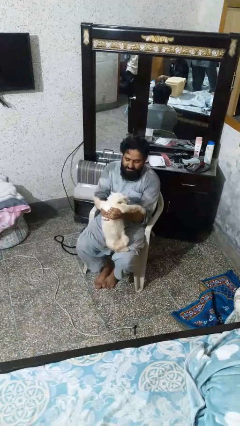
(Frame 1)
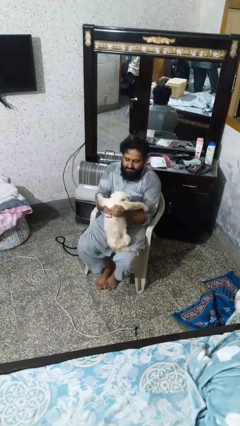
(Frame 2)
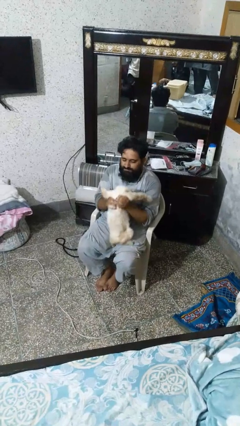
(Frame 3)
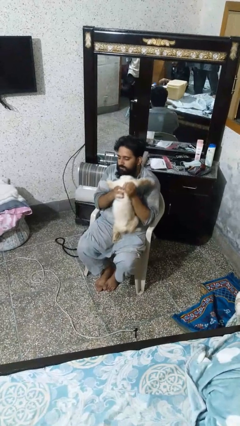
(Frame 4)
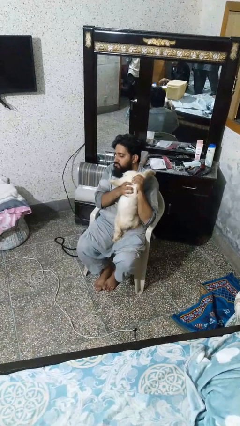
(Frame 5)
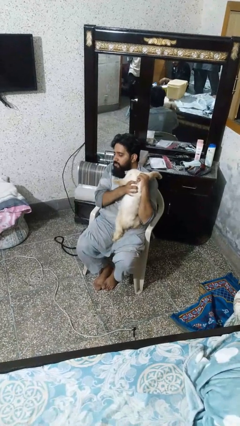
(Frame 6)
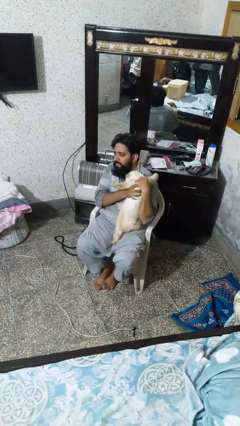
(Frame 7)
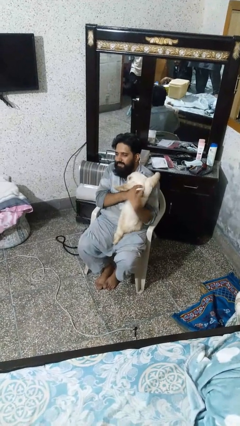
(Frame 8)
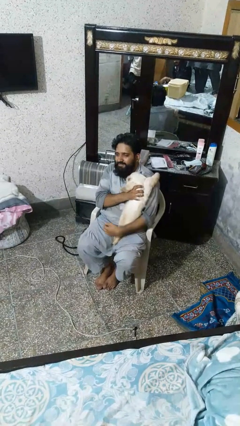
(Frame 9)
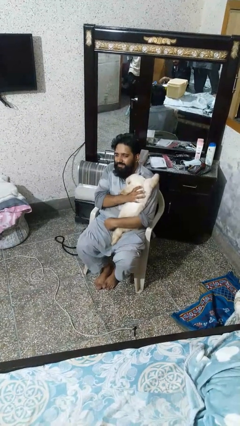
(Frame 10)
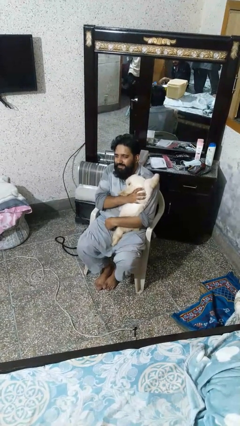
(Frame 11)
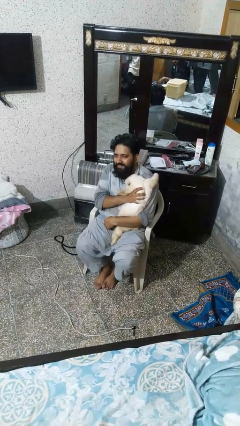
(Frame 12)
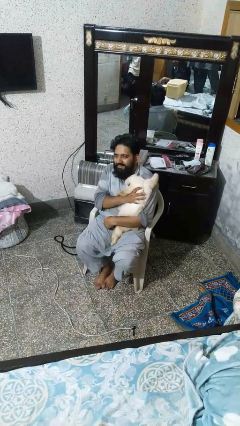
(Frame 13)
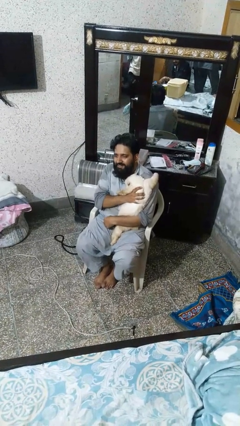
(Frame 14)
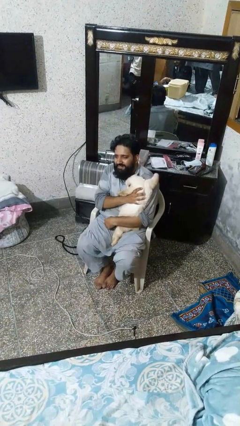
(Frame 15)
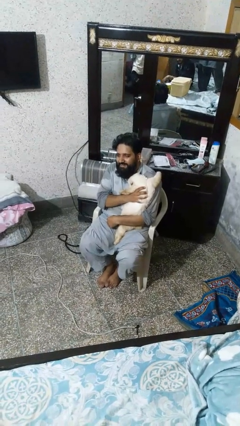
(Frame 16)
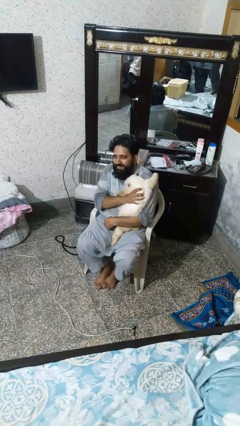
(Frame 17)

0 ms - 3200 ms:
person hugs cat

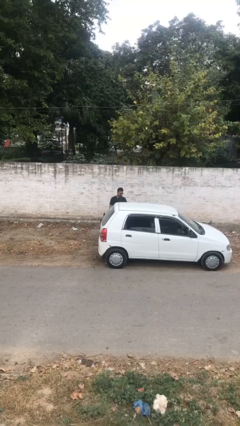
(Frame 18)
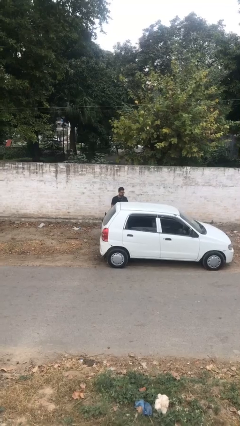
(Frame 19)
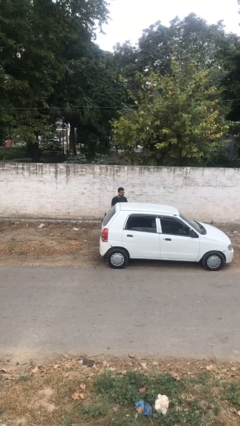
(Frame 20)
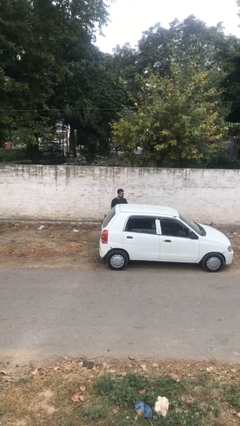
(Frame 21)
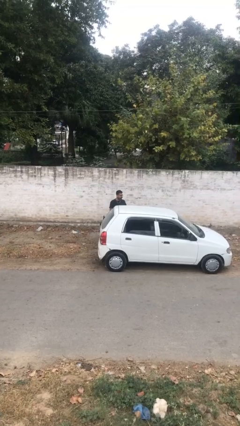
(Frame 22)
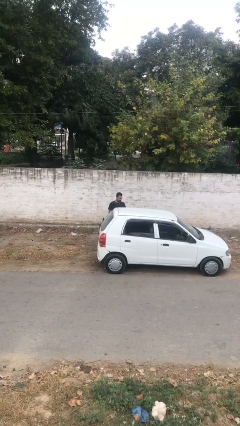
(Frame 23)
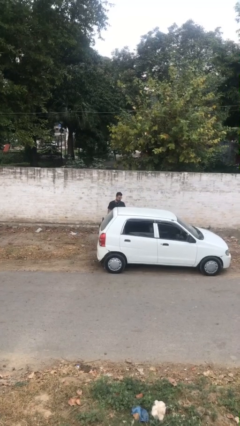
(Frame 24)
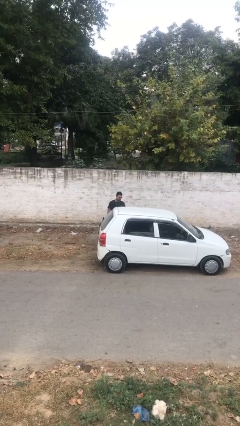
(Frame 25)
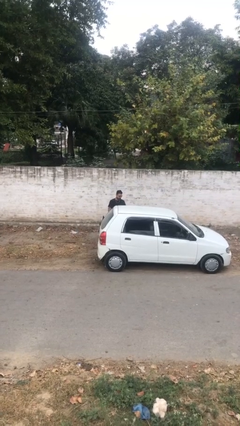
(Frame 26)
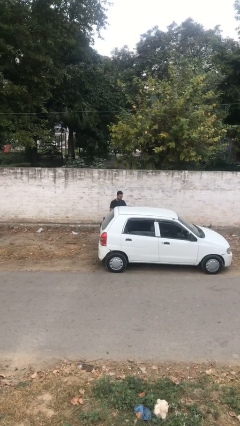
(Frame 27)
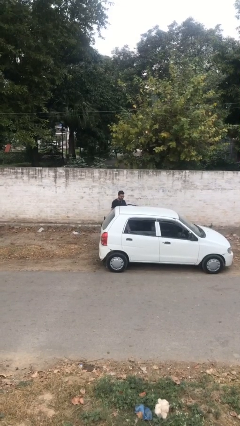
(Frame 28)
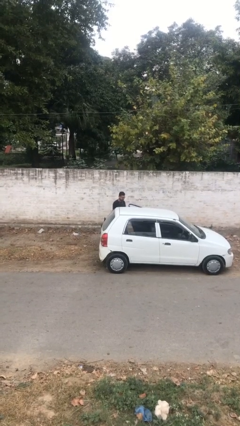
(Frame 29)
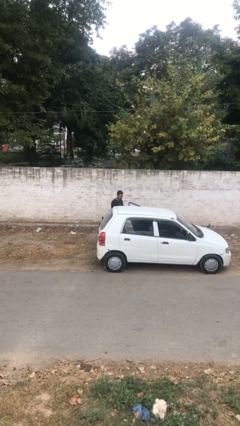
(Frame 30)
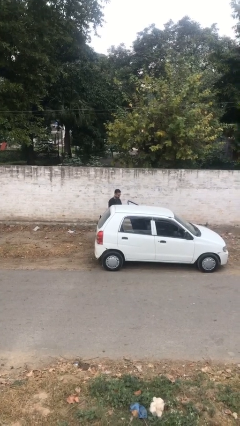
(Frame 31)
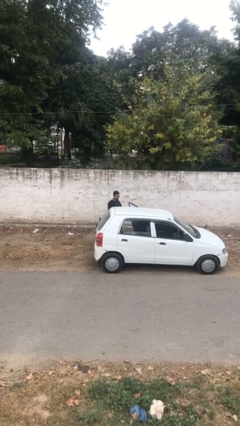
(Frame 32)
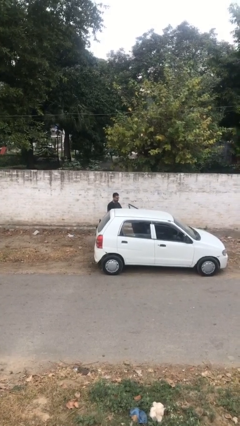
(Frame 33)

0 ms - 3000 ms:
person opens car door

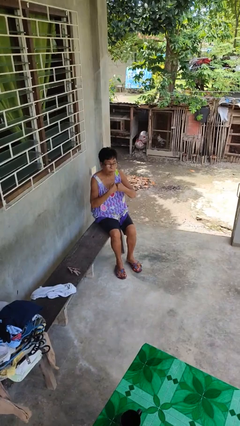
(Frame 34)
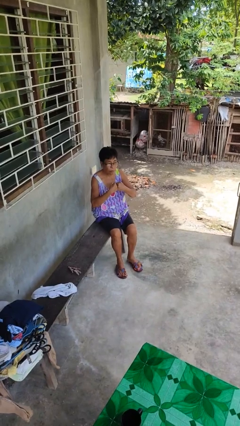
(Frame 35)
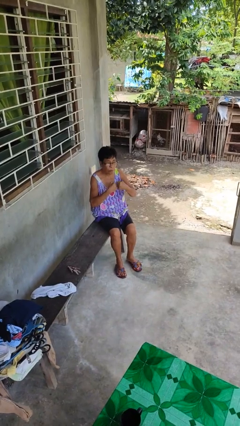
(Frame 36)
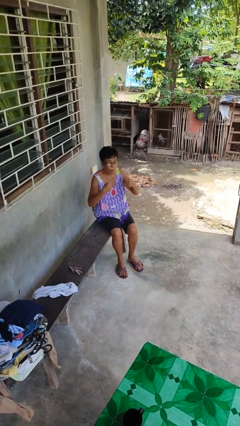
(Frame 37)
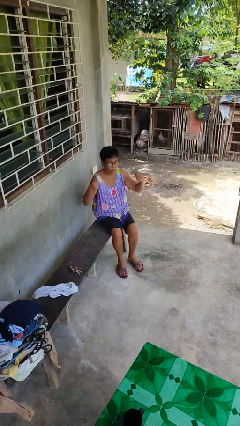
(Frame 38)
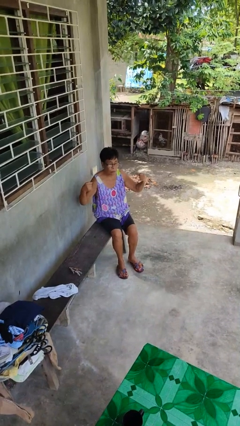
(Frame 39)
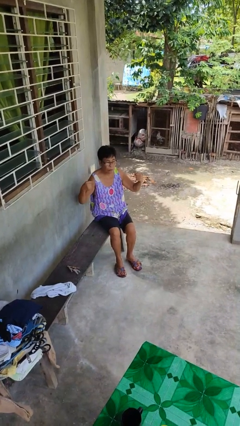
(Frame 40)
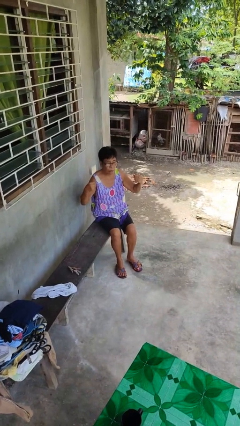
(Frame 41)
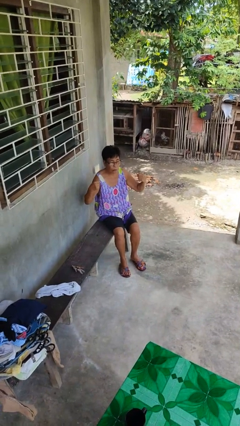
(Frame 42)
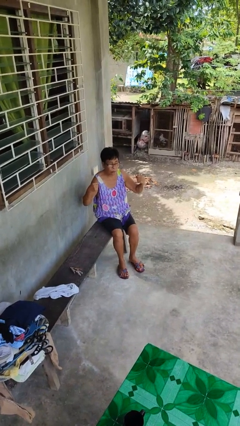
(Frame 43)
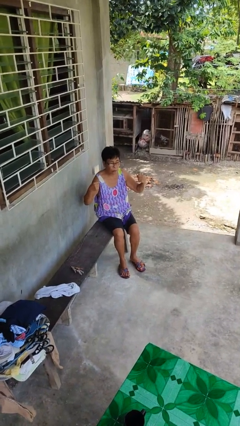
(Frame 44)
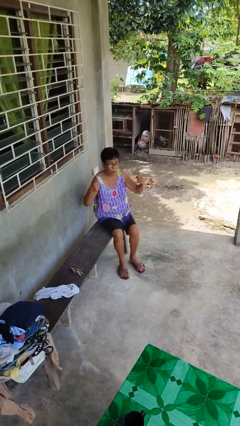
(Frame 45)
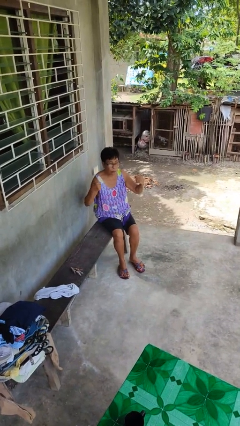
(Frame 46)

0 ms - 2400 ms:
person gestures zoom in

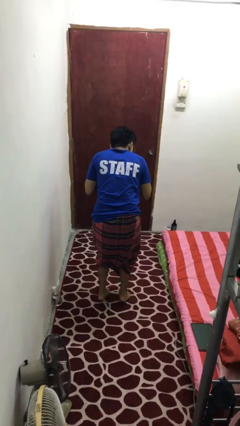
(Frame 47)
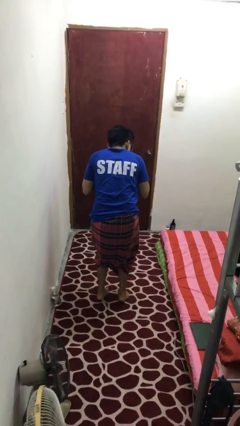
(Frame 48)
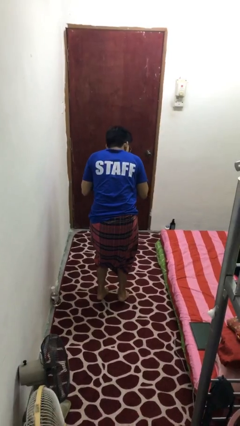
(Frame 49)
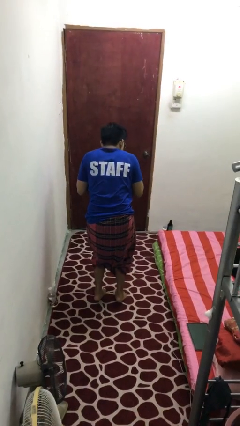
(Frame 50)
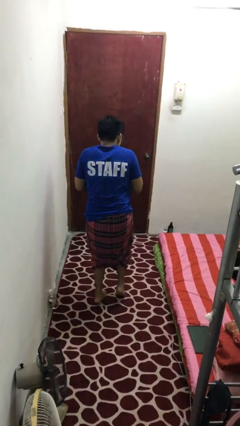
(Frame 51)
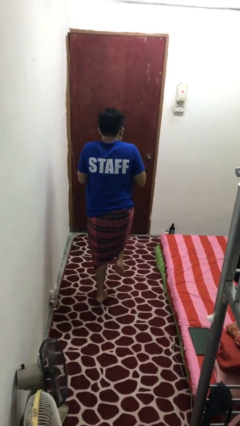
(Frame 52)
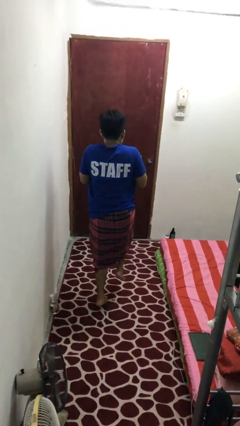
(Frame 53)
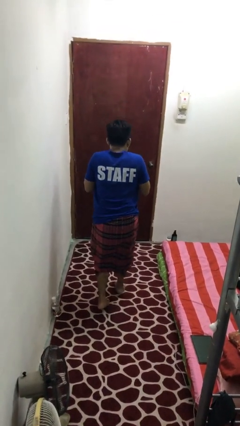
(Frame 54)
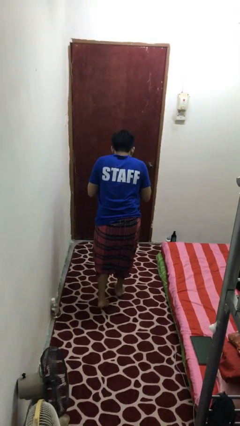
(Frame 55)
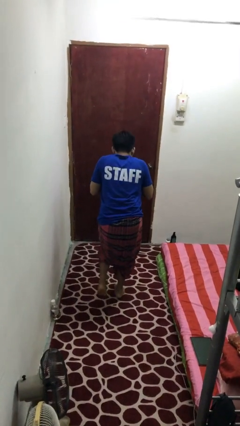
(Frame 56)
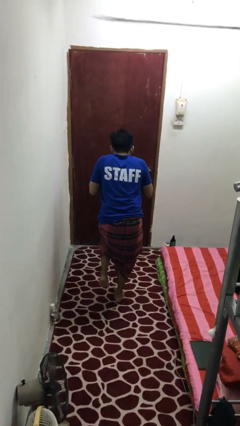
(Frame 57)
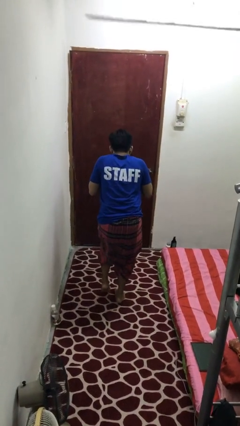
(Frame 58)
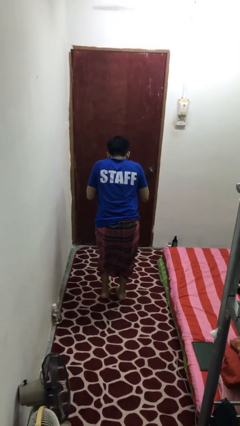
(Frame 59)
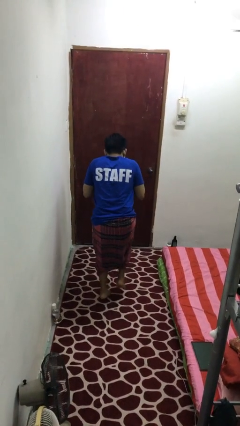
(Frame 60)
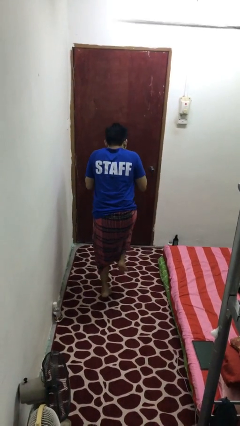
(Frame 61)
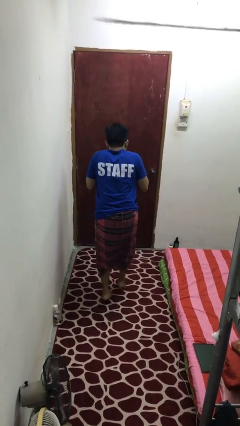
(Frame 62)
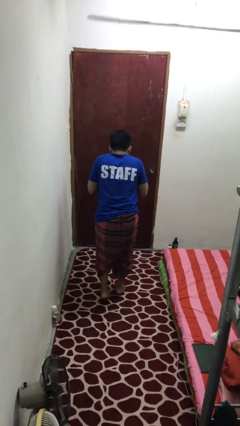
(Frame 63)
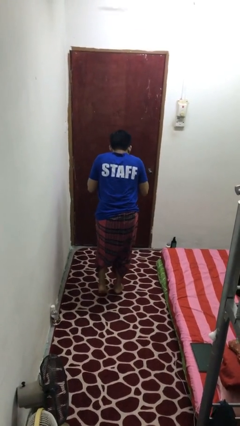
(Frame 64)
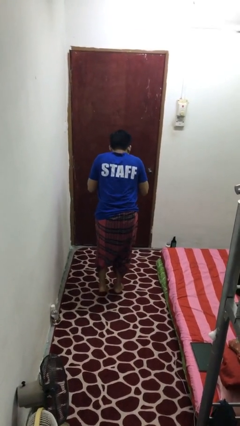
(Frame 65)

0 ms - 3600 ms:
person walks tiptoe

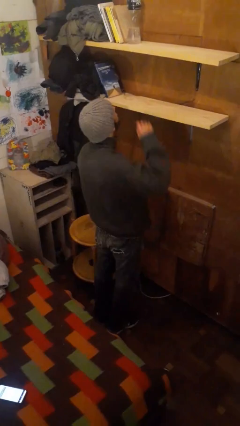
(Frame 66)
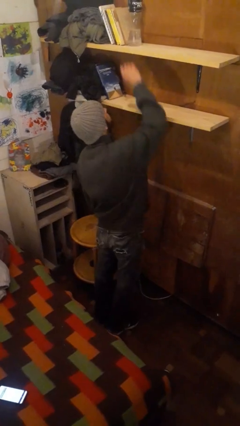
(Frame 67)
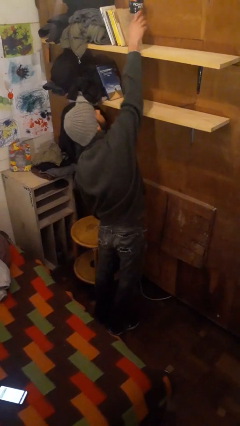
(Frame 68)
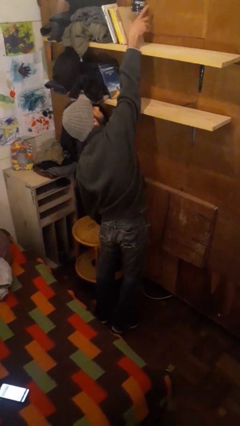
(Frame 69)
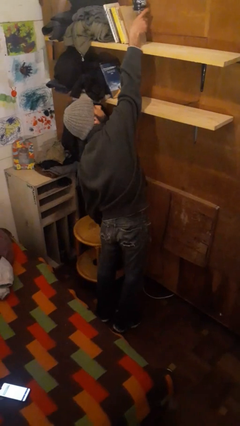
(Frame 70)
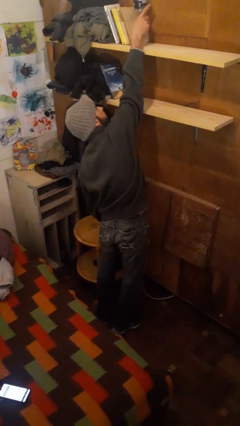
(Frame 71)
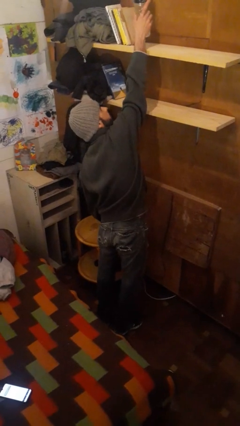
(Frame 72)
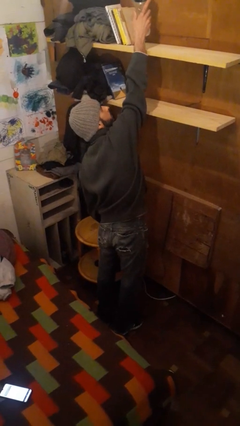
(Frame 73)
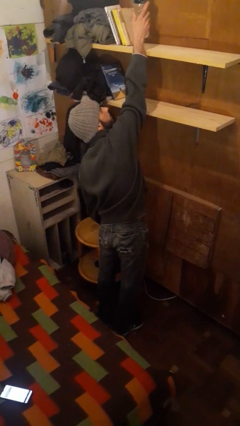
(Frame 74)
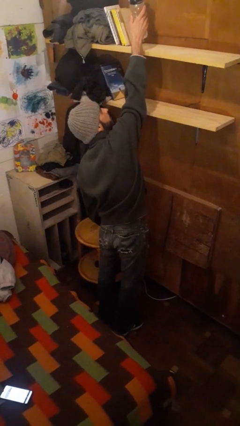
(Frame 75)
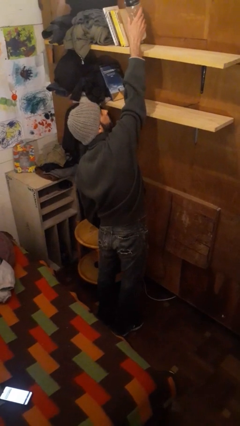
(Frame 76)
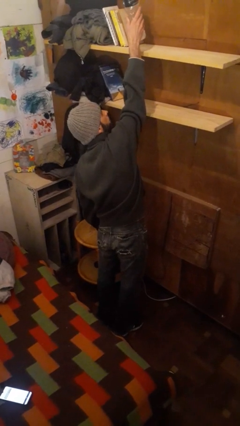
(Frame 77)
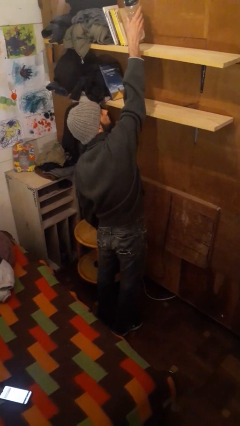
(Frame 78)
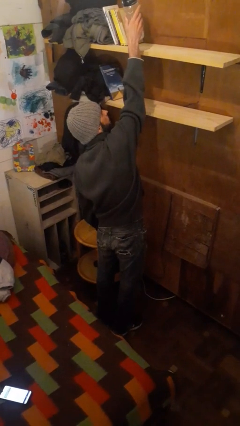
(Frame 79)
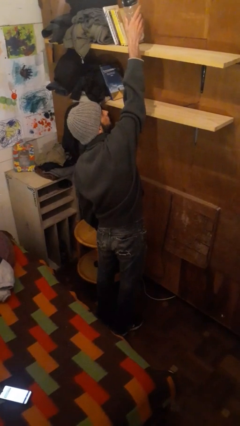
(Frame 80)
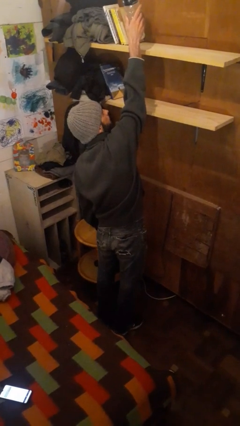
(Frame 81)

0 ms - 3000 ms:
person picks up object from shelf

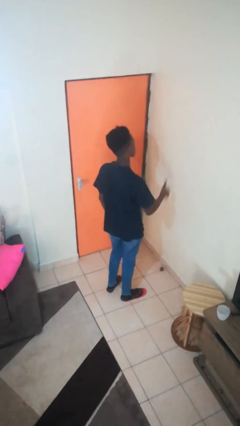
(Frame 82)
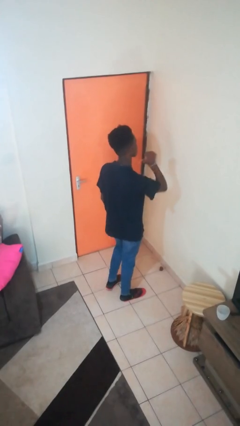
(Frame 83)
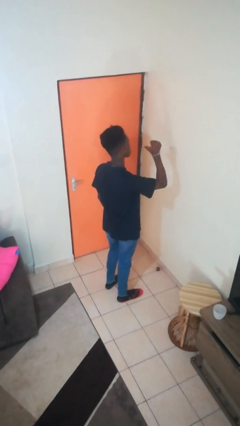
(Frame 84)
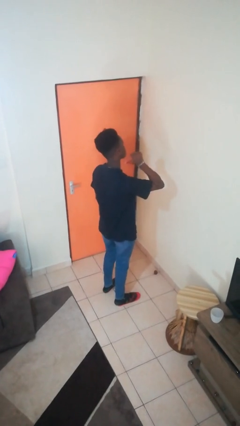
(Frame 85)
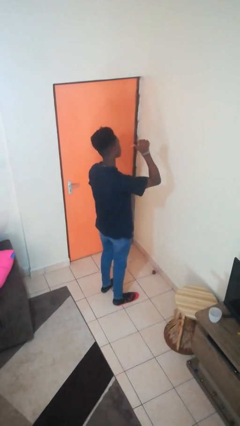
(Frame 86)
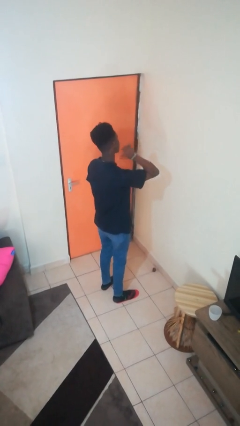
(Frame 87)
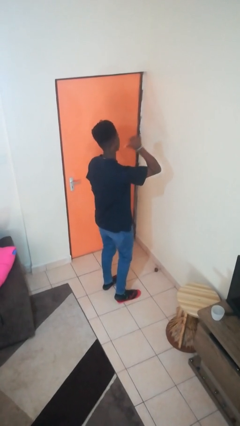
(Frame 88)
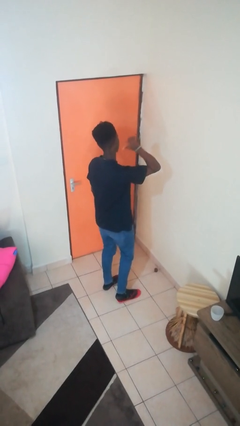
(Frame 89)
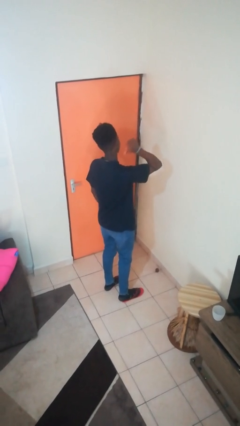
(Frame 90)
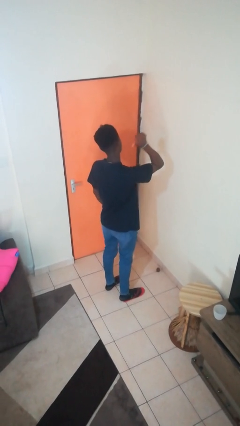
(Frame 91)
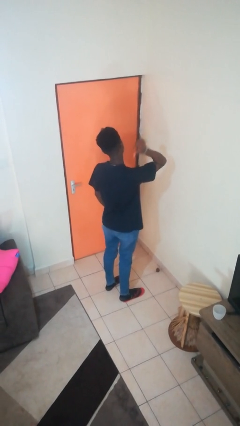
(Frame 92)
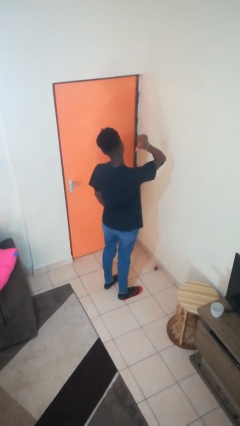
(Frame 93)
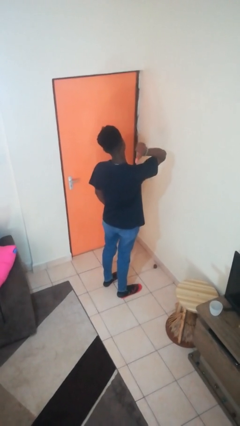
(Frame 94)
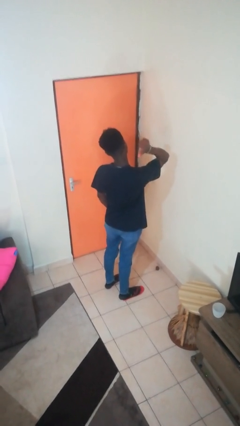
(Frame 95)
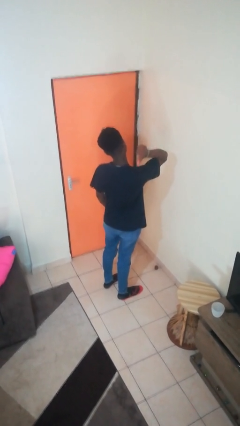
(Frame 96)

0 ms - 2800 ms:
person gestures behind me
